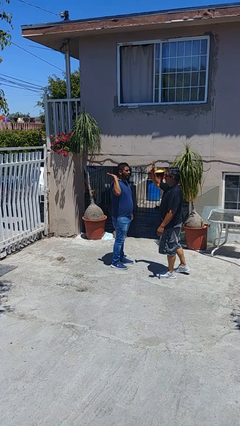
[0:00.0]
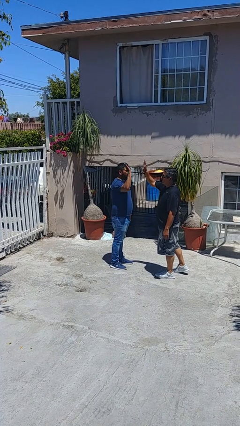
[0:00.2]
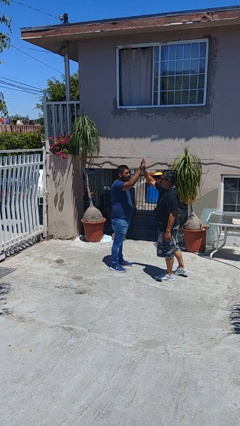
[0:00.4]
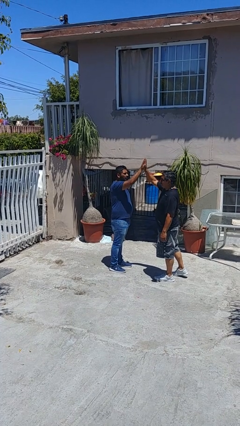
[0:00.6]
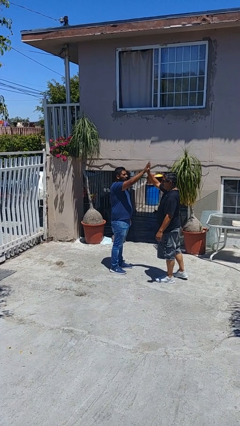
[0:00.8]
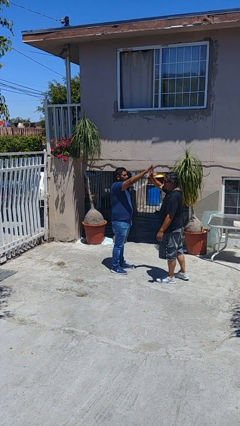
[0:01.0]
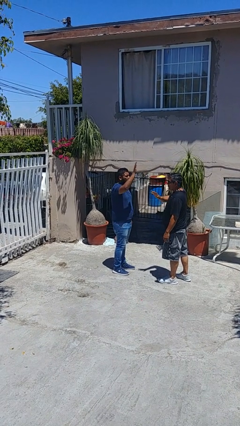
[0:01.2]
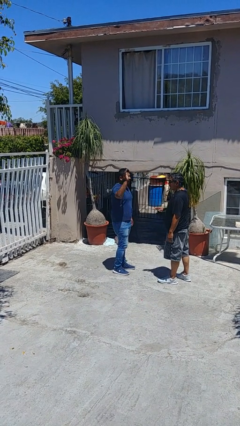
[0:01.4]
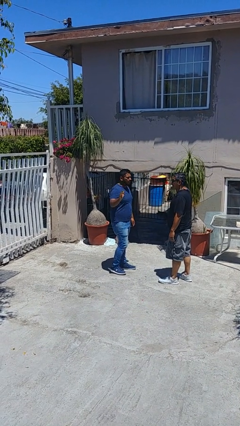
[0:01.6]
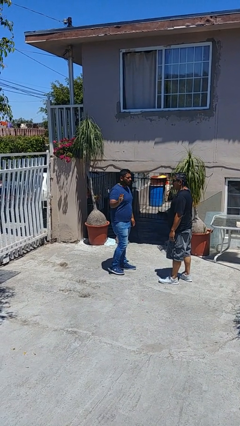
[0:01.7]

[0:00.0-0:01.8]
person highfives hand

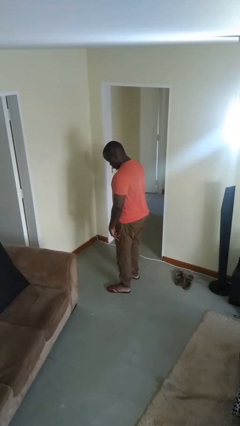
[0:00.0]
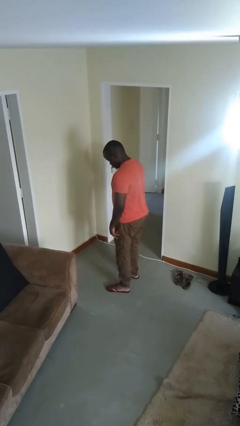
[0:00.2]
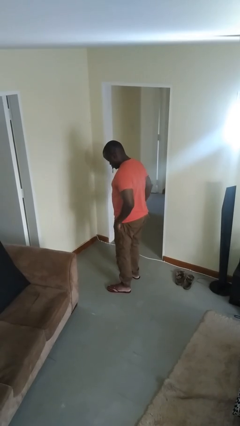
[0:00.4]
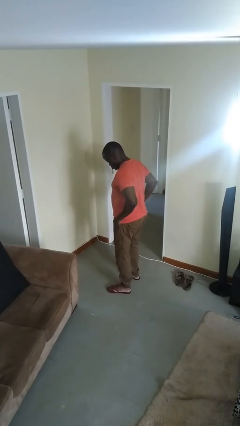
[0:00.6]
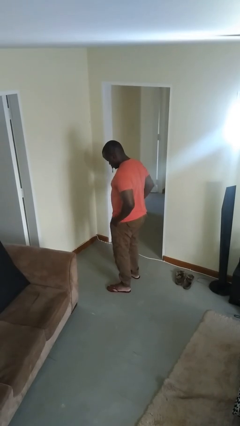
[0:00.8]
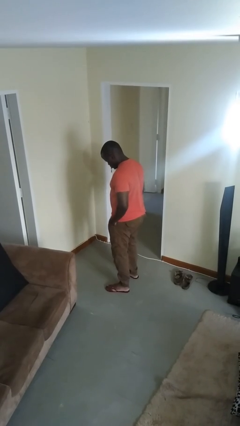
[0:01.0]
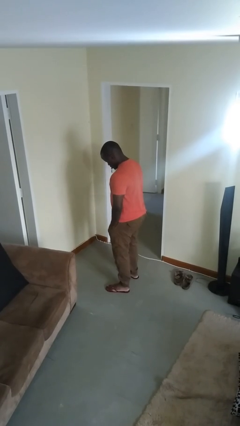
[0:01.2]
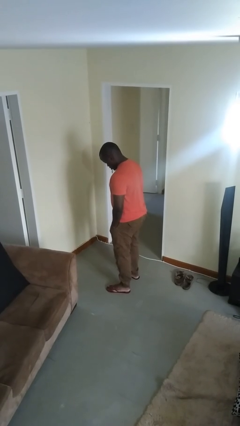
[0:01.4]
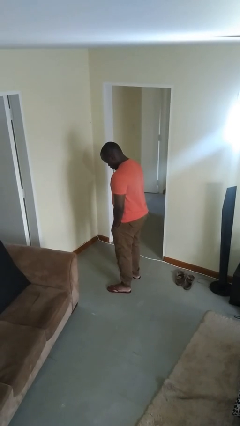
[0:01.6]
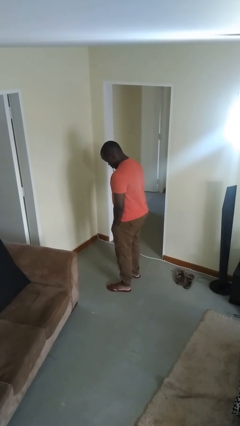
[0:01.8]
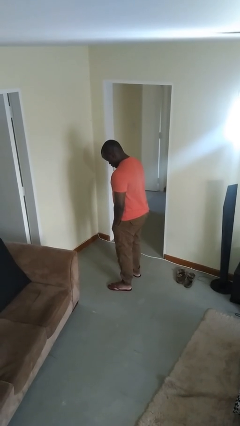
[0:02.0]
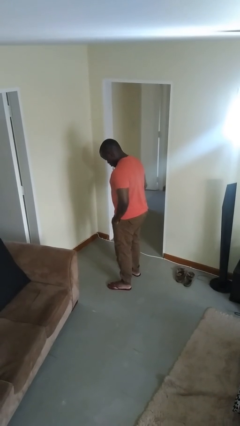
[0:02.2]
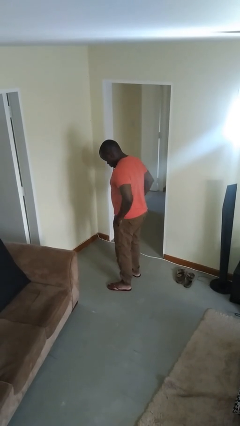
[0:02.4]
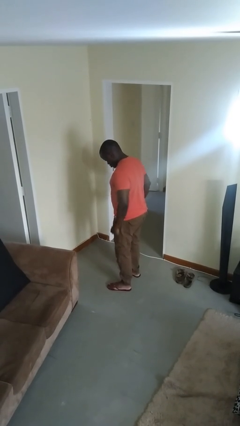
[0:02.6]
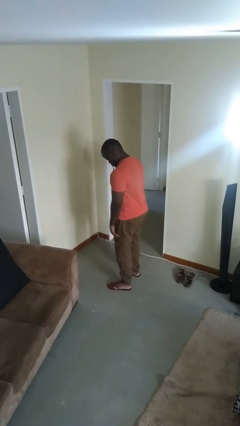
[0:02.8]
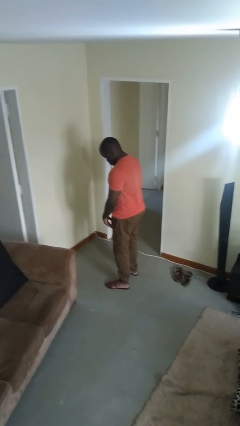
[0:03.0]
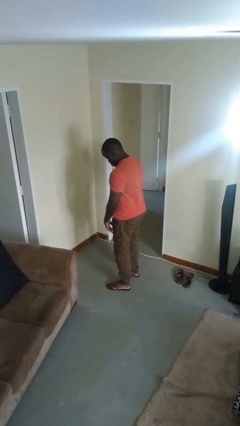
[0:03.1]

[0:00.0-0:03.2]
person puts hands in back pockets

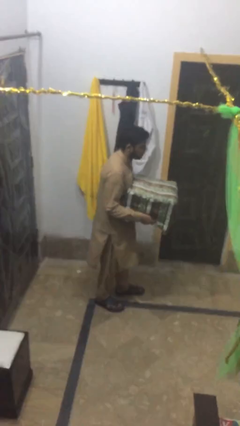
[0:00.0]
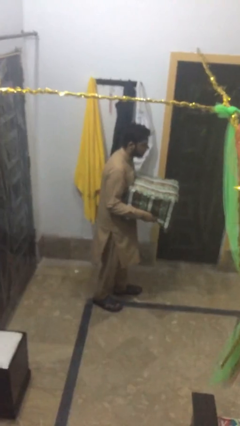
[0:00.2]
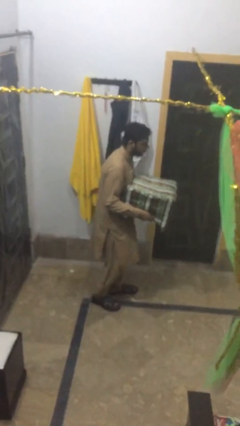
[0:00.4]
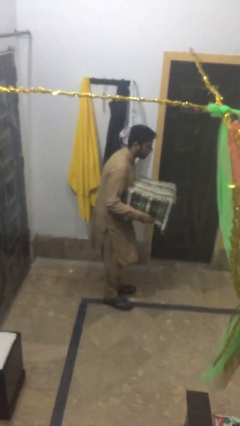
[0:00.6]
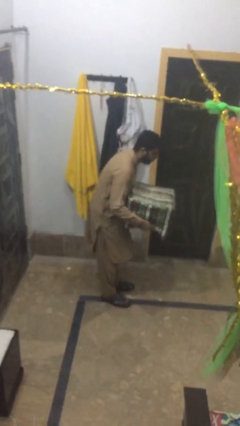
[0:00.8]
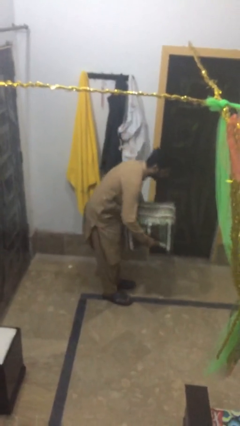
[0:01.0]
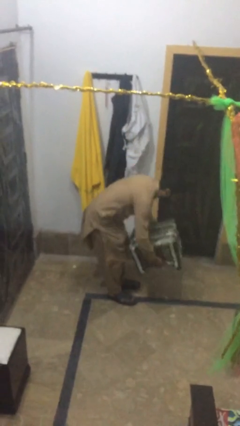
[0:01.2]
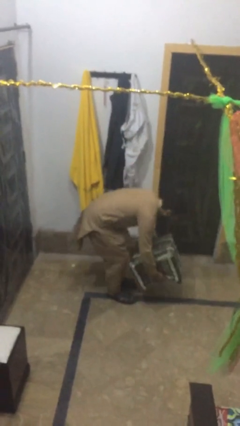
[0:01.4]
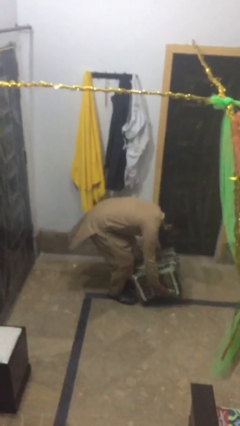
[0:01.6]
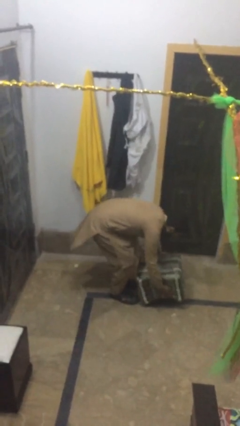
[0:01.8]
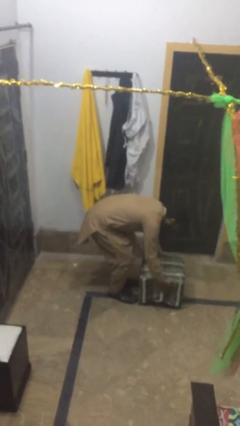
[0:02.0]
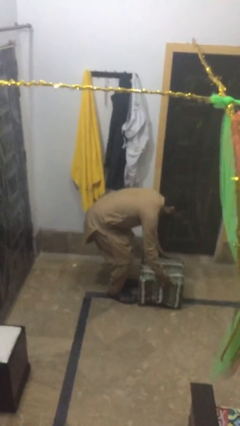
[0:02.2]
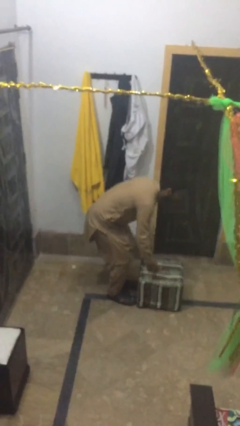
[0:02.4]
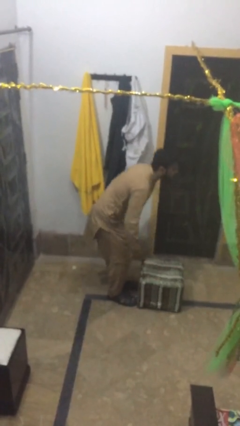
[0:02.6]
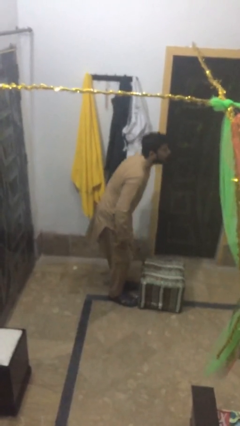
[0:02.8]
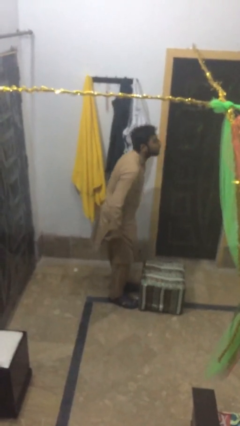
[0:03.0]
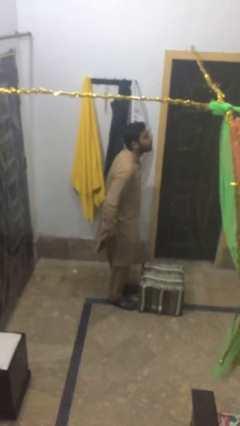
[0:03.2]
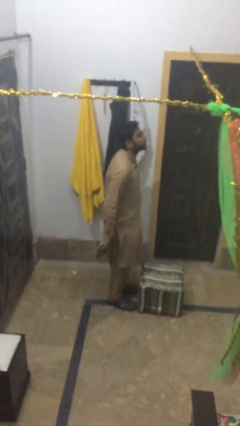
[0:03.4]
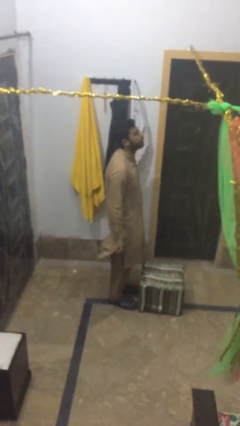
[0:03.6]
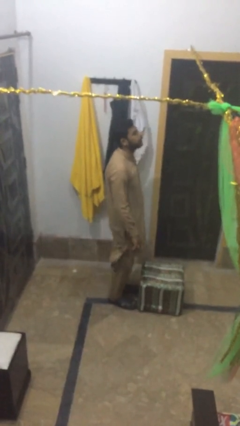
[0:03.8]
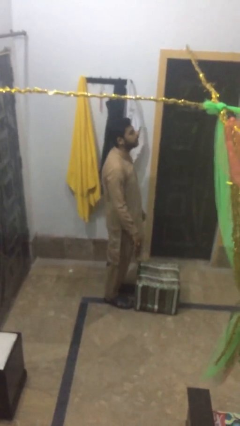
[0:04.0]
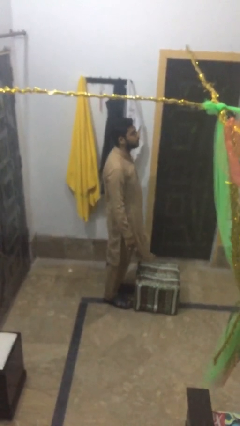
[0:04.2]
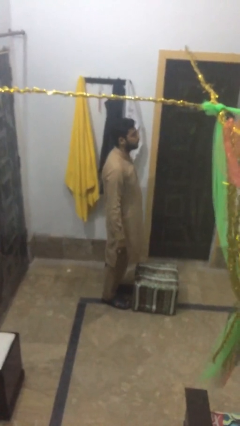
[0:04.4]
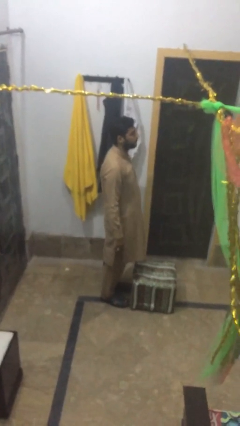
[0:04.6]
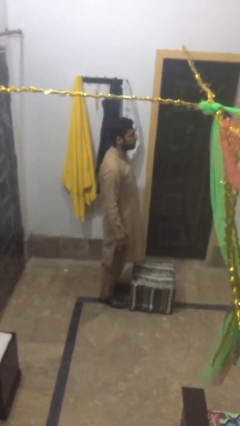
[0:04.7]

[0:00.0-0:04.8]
person puts down object on floor

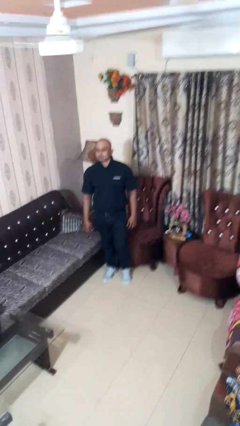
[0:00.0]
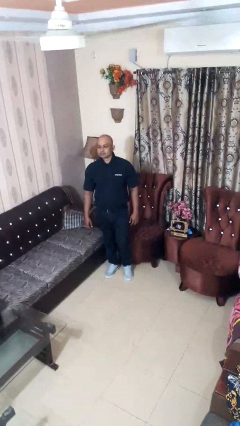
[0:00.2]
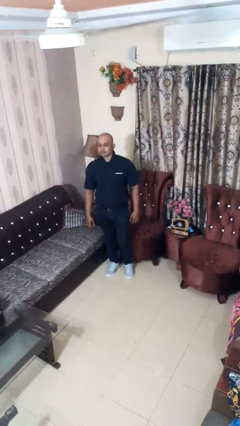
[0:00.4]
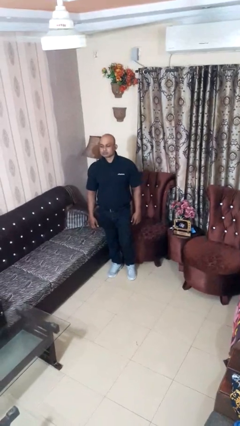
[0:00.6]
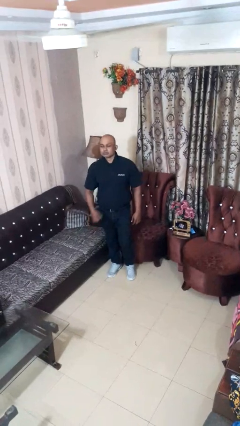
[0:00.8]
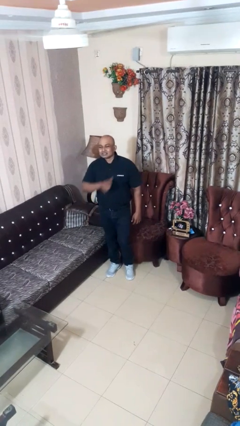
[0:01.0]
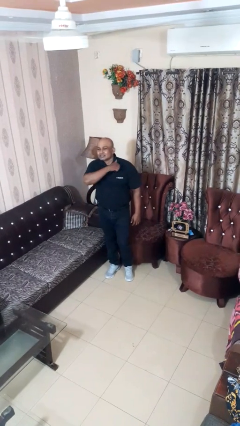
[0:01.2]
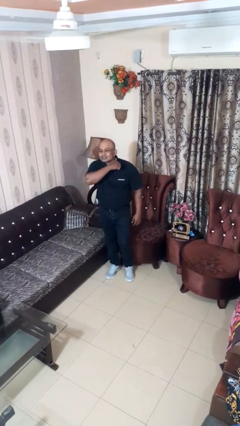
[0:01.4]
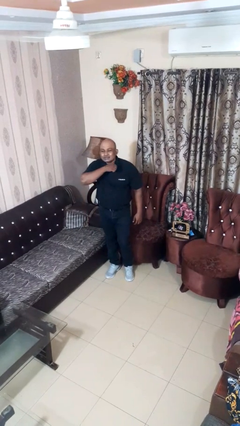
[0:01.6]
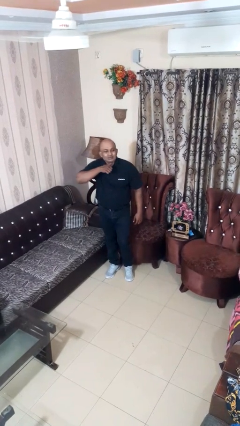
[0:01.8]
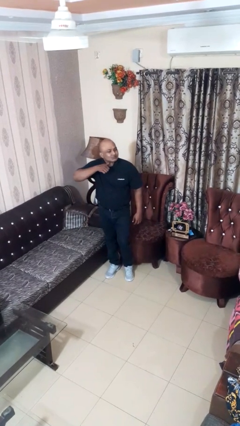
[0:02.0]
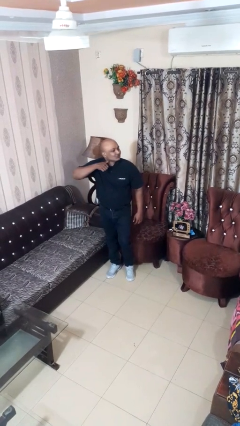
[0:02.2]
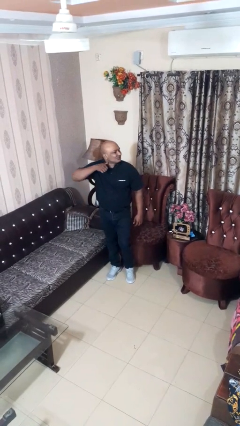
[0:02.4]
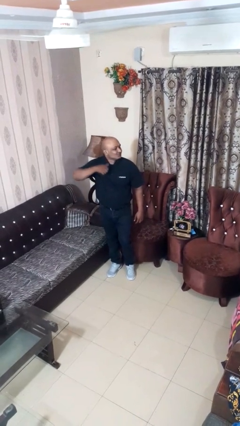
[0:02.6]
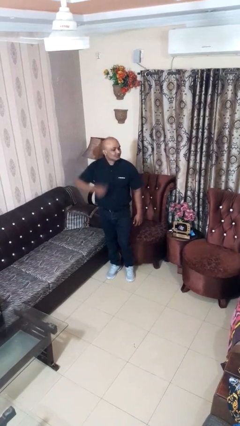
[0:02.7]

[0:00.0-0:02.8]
person gestures cut

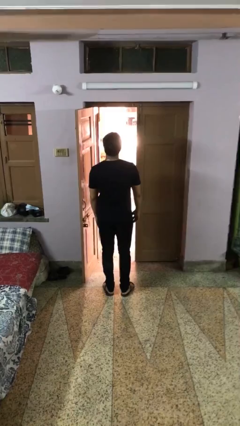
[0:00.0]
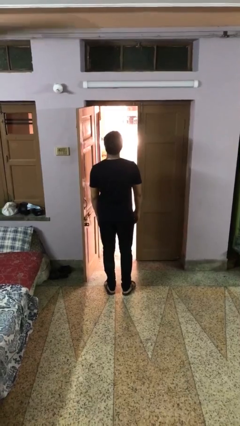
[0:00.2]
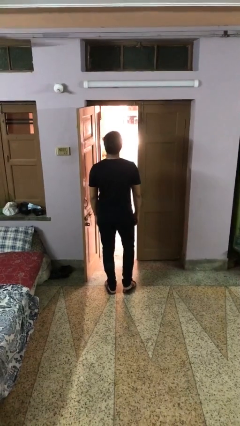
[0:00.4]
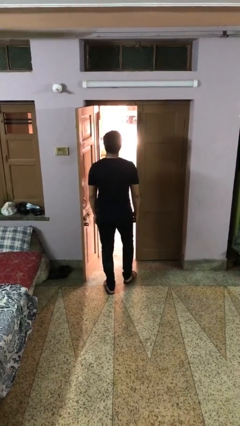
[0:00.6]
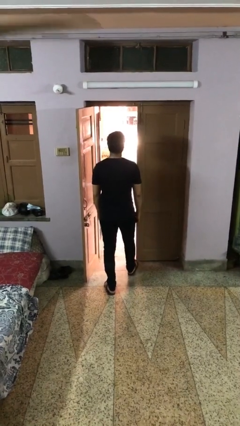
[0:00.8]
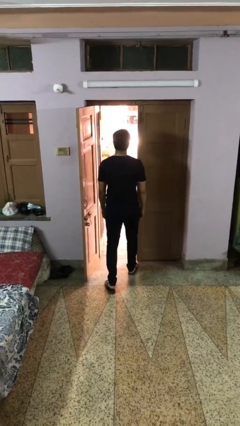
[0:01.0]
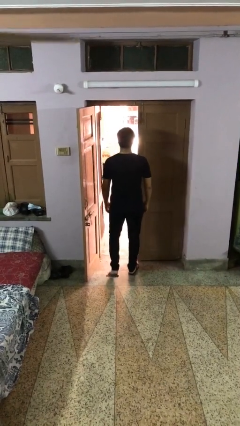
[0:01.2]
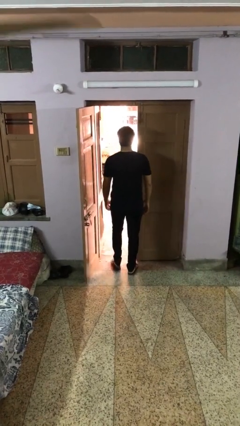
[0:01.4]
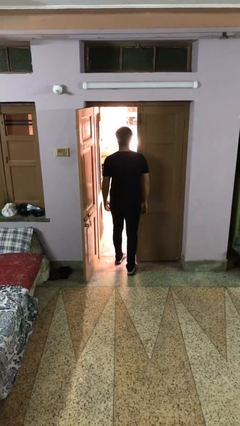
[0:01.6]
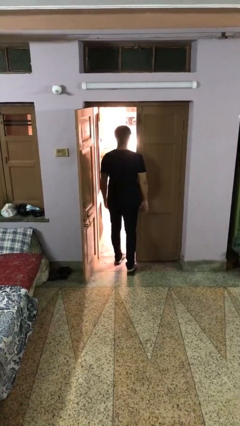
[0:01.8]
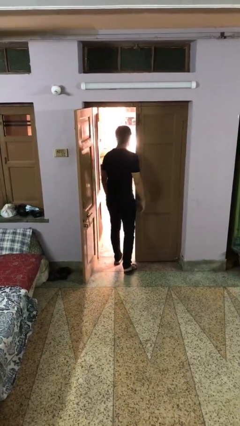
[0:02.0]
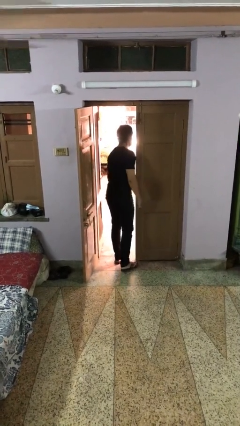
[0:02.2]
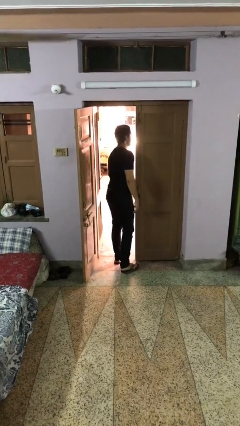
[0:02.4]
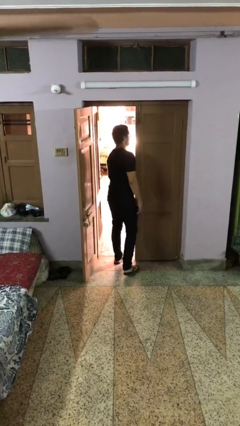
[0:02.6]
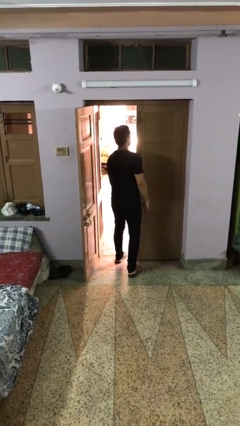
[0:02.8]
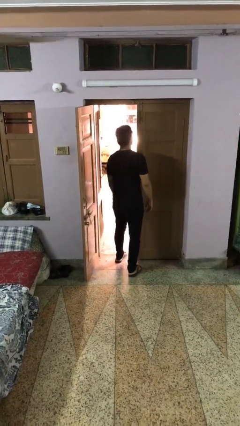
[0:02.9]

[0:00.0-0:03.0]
person bumps into wall

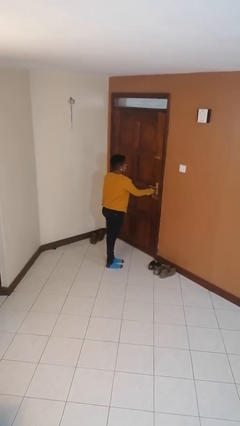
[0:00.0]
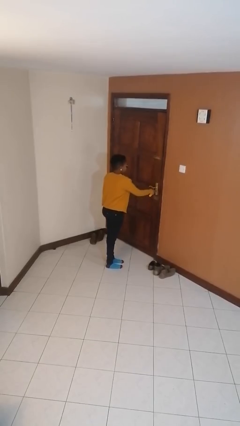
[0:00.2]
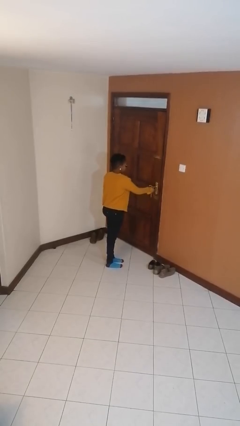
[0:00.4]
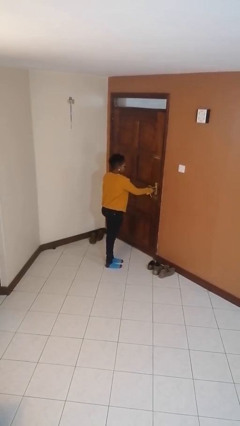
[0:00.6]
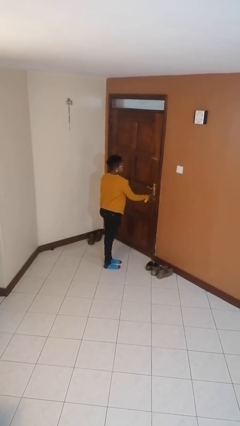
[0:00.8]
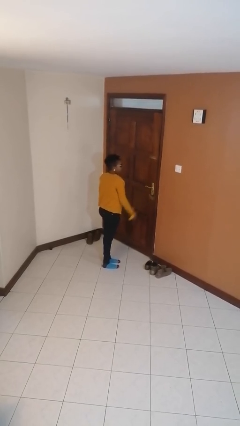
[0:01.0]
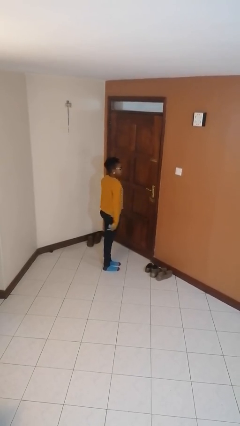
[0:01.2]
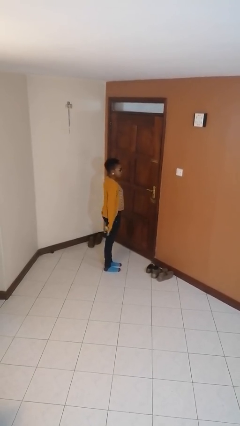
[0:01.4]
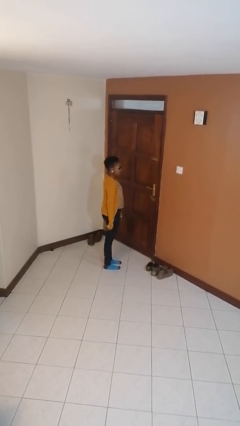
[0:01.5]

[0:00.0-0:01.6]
person locks door with keys
